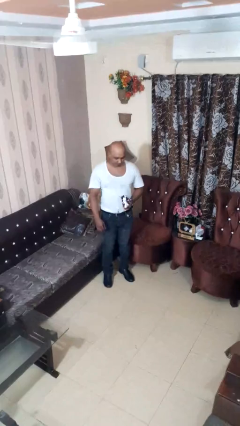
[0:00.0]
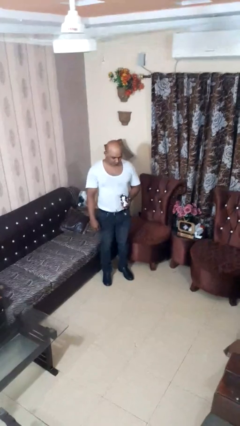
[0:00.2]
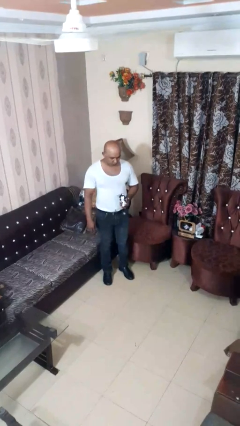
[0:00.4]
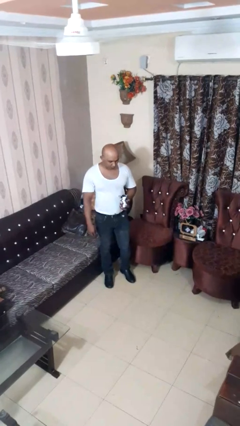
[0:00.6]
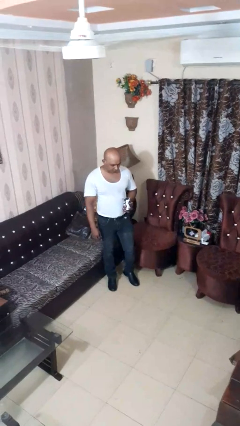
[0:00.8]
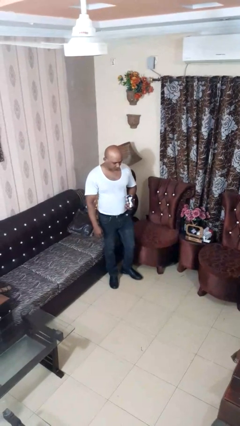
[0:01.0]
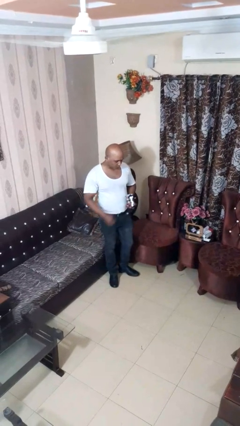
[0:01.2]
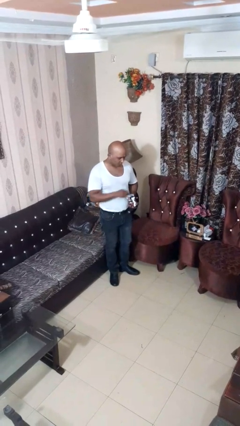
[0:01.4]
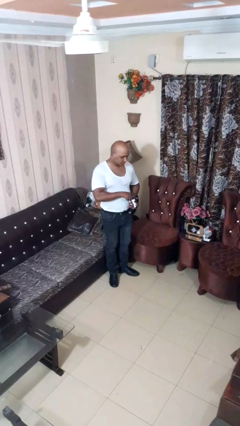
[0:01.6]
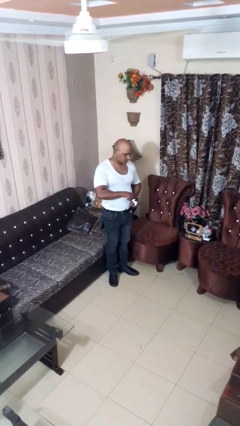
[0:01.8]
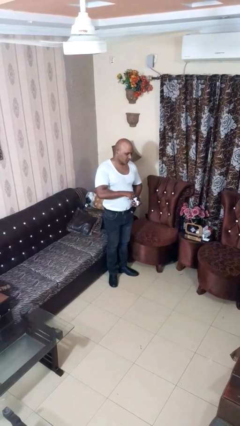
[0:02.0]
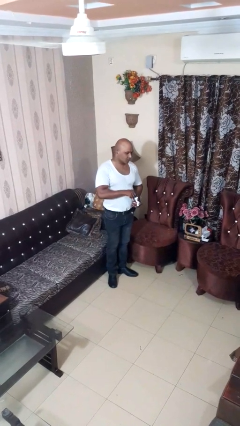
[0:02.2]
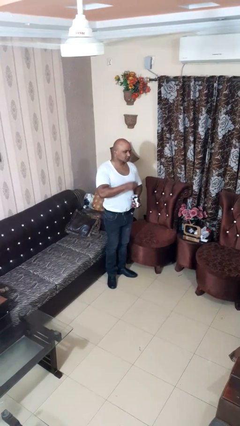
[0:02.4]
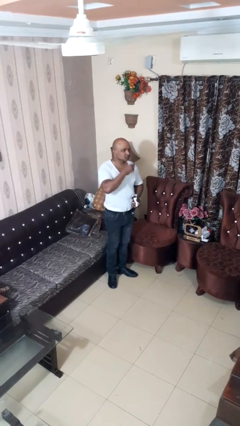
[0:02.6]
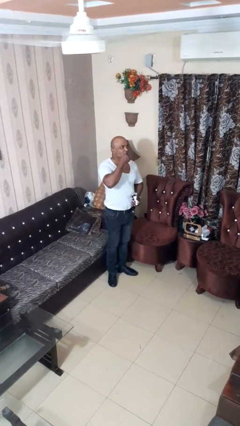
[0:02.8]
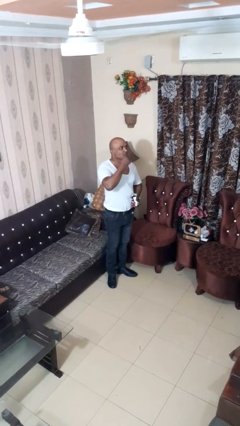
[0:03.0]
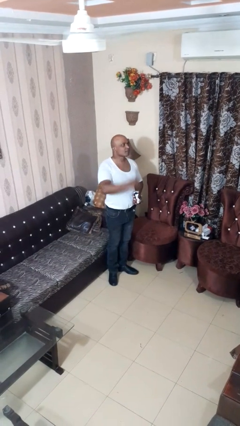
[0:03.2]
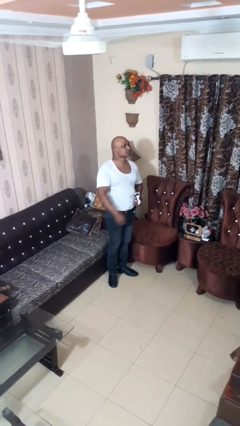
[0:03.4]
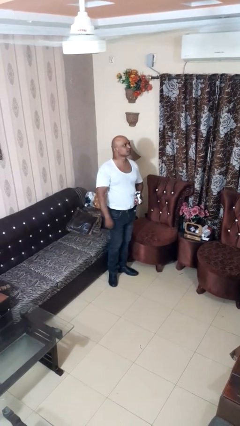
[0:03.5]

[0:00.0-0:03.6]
person eats snack from bag

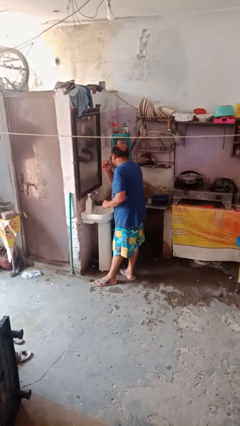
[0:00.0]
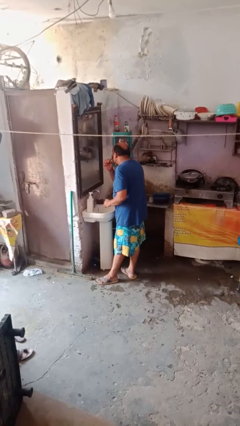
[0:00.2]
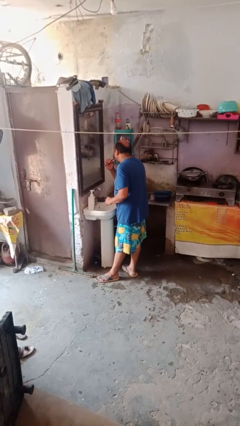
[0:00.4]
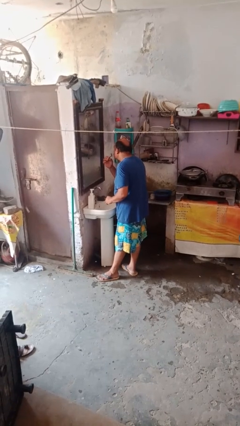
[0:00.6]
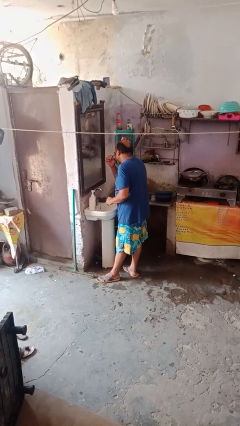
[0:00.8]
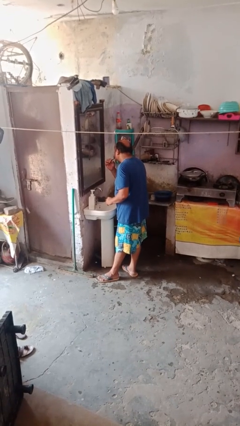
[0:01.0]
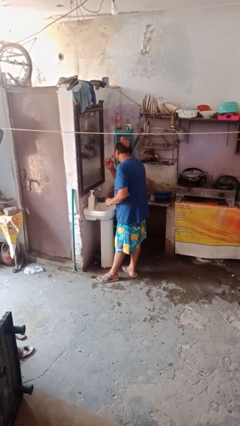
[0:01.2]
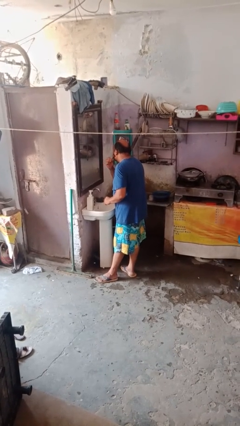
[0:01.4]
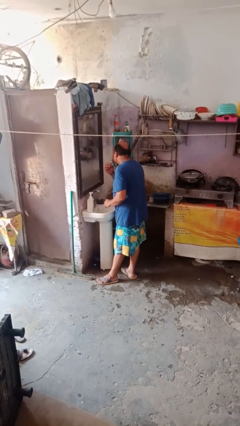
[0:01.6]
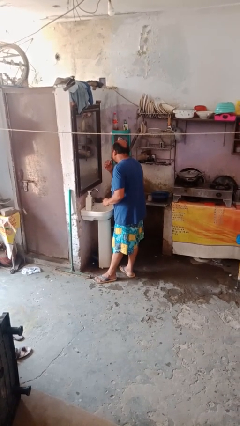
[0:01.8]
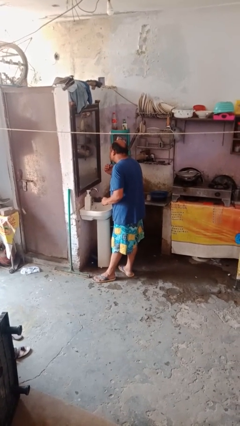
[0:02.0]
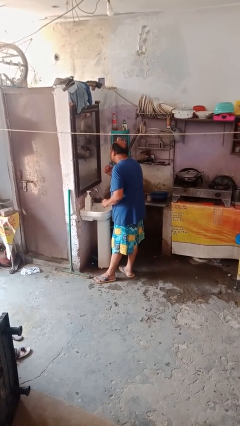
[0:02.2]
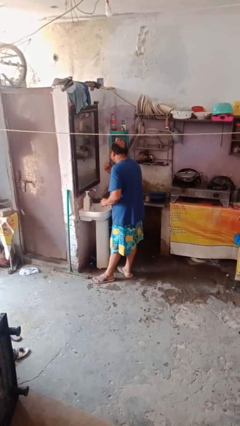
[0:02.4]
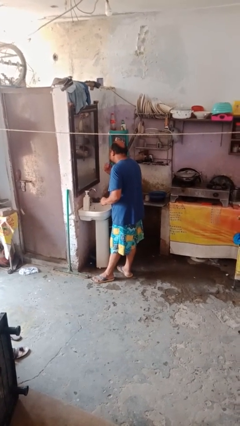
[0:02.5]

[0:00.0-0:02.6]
person shaves face

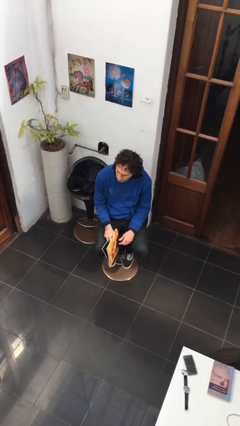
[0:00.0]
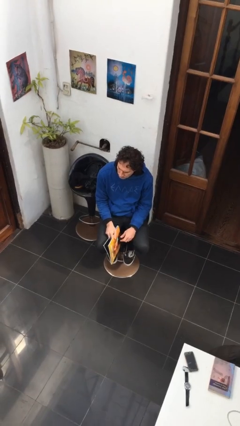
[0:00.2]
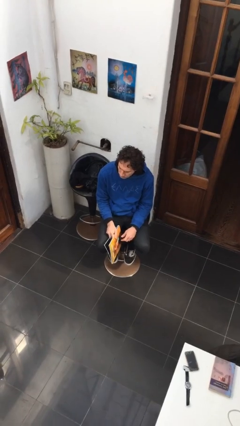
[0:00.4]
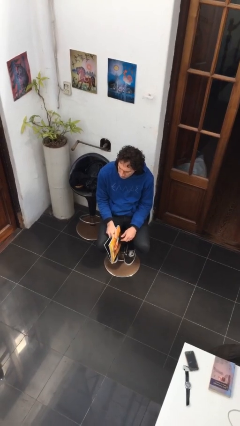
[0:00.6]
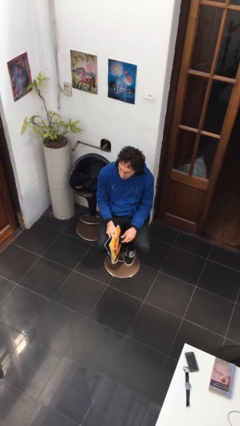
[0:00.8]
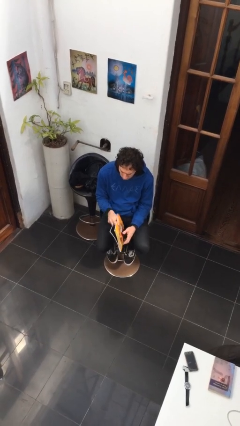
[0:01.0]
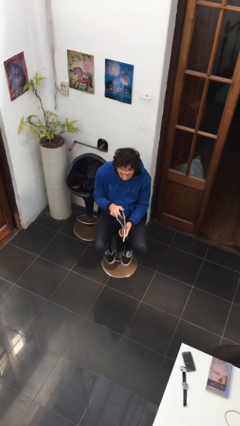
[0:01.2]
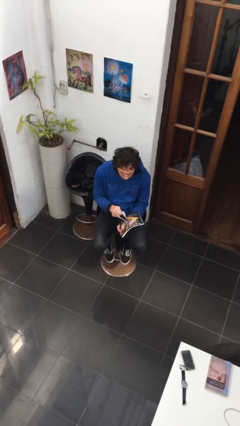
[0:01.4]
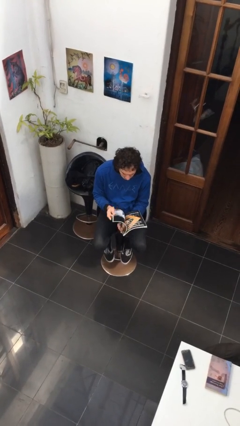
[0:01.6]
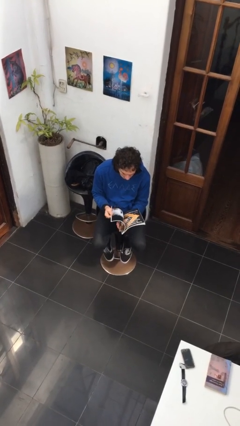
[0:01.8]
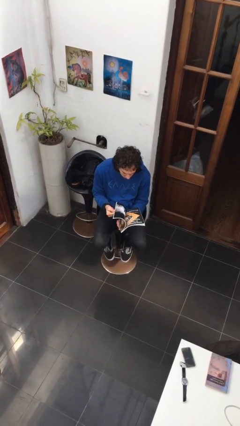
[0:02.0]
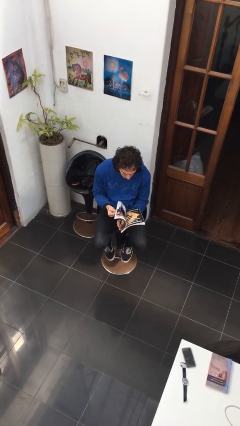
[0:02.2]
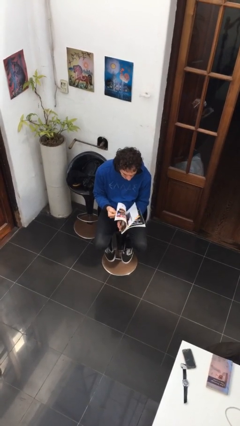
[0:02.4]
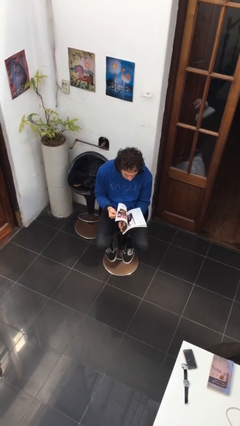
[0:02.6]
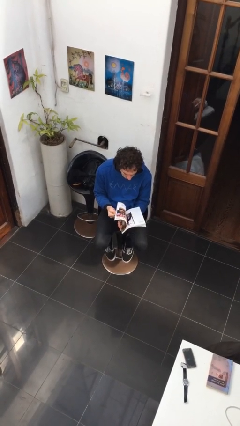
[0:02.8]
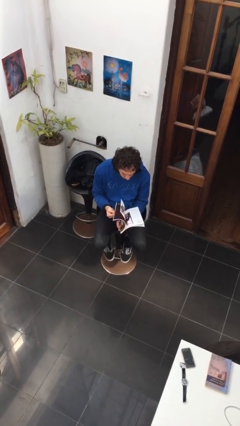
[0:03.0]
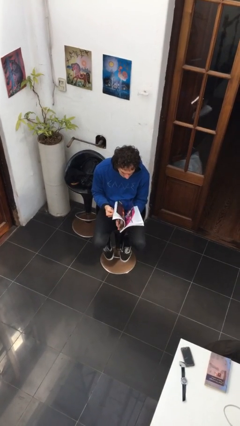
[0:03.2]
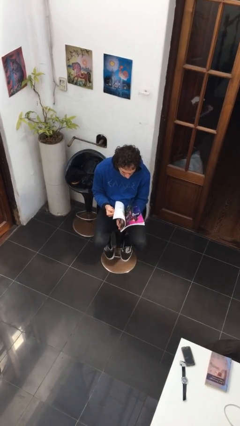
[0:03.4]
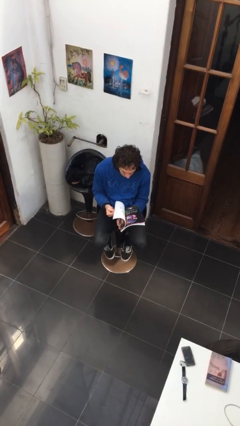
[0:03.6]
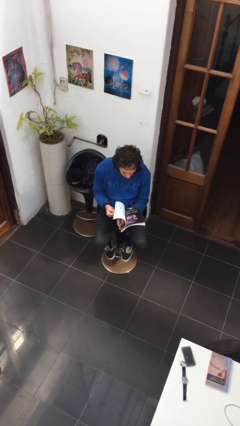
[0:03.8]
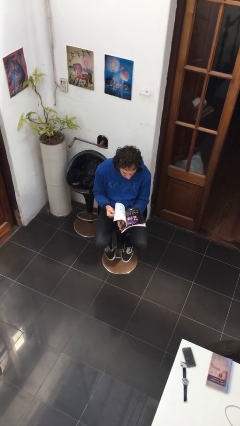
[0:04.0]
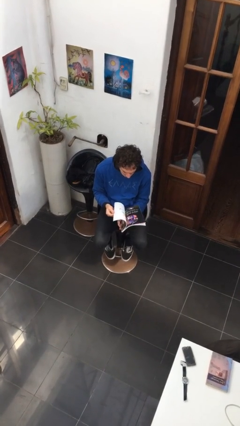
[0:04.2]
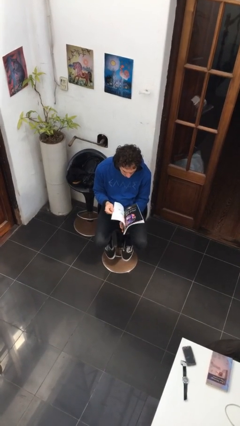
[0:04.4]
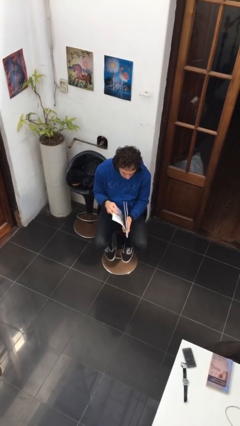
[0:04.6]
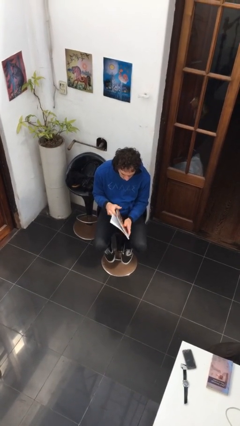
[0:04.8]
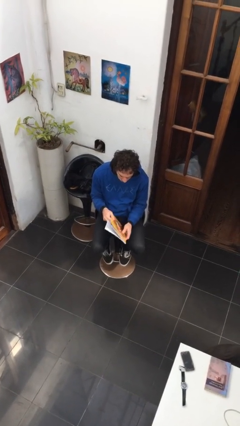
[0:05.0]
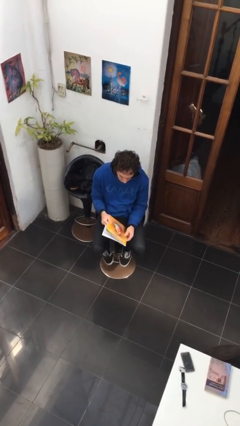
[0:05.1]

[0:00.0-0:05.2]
person reads magazine

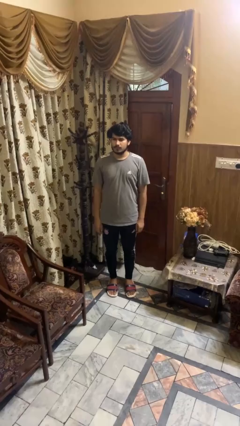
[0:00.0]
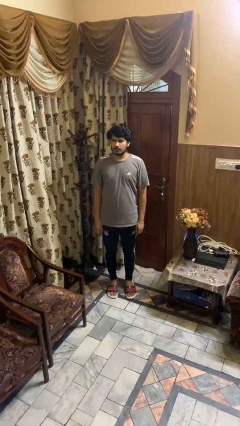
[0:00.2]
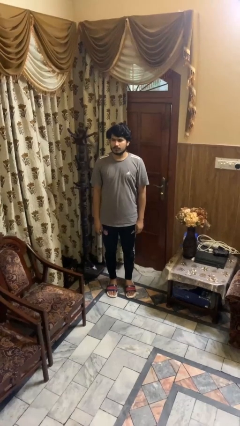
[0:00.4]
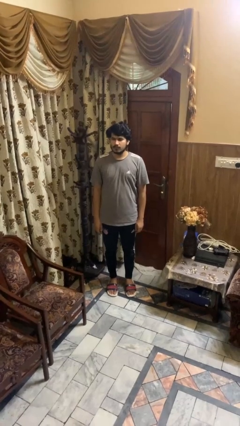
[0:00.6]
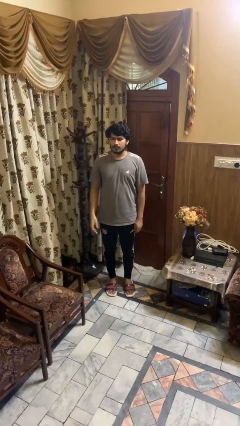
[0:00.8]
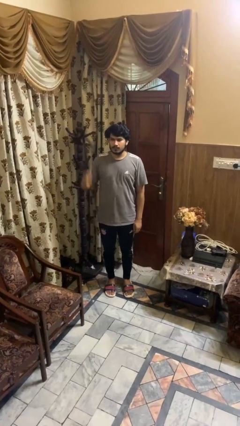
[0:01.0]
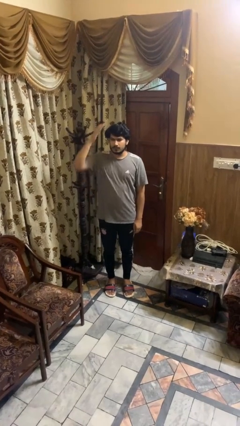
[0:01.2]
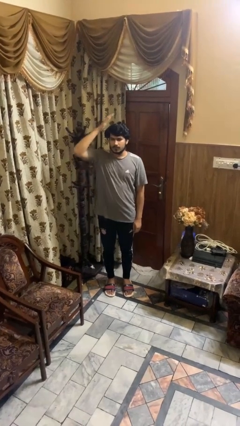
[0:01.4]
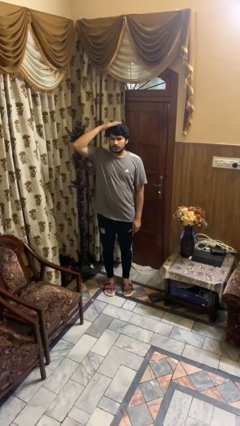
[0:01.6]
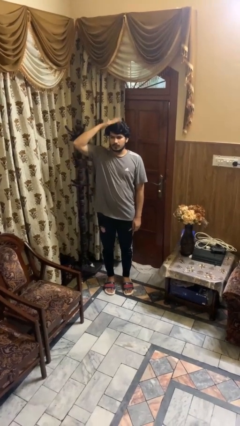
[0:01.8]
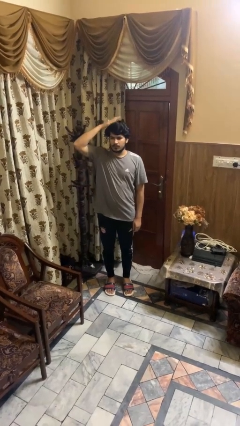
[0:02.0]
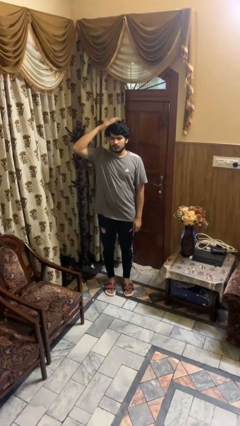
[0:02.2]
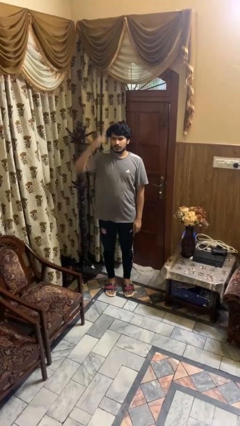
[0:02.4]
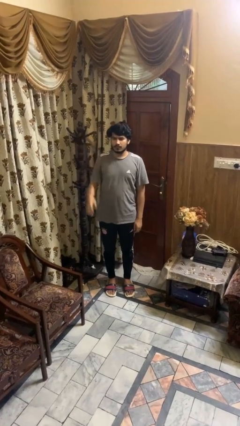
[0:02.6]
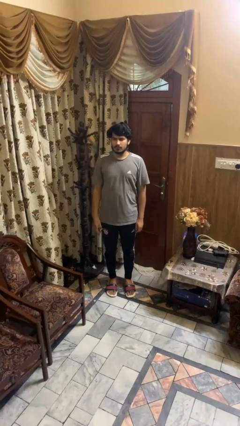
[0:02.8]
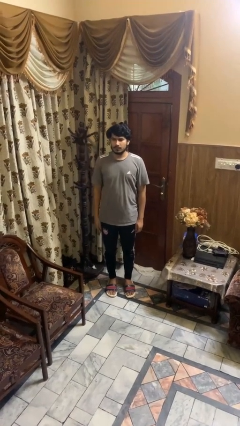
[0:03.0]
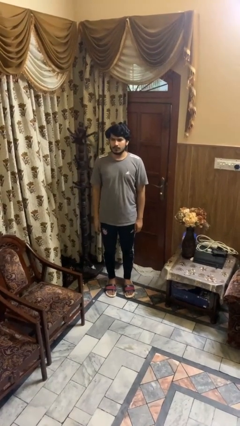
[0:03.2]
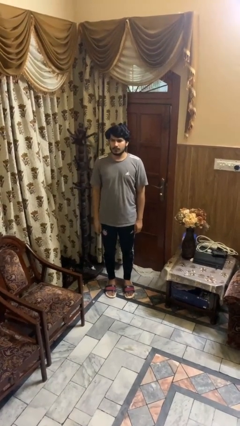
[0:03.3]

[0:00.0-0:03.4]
person pats head

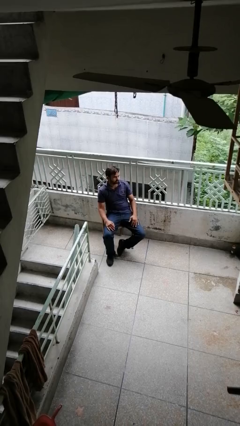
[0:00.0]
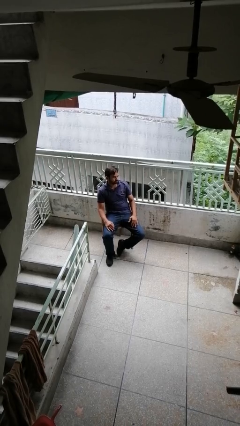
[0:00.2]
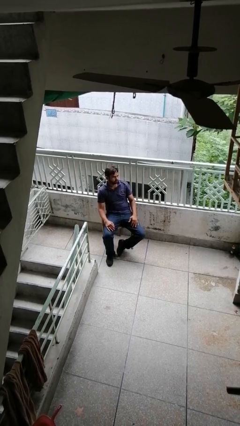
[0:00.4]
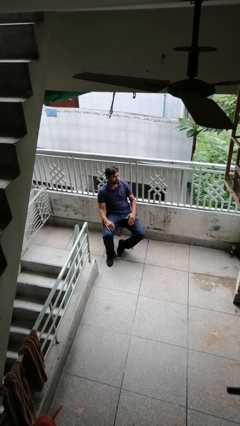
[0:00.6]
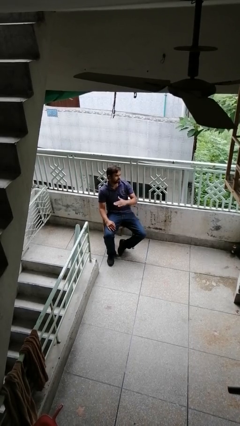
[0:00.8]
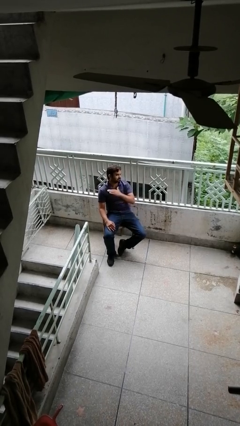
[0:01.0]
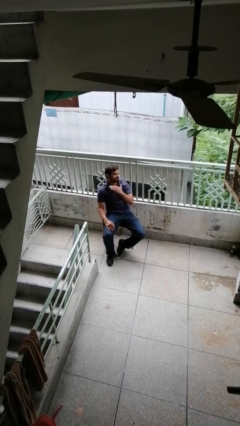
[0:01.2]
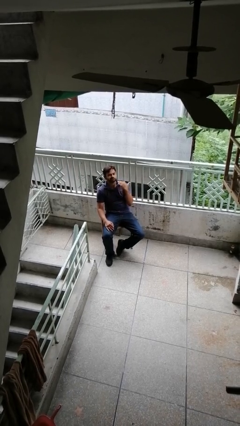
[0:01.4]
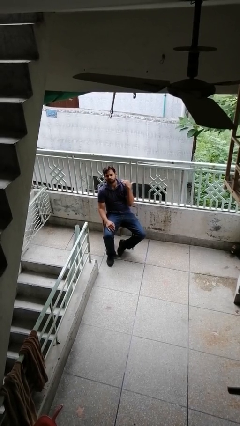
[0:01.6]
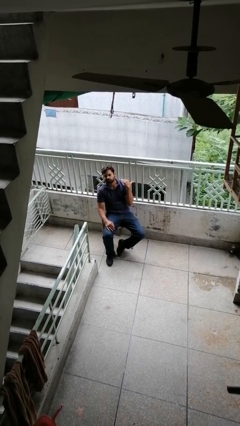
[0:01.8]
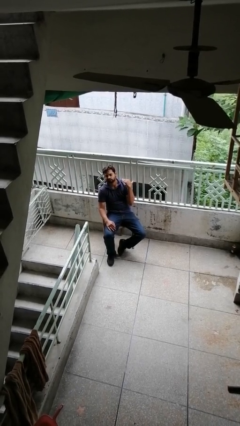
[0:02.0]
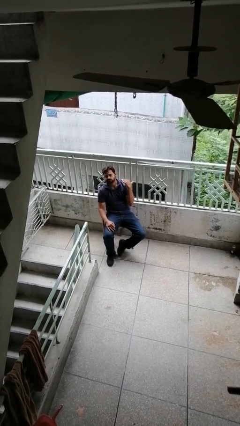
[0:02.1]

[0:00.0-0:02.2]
person gestures cut

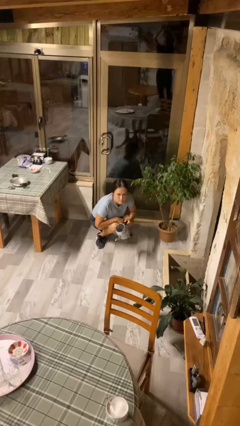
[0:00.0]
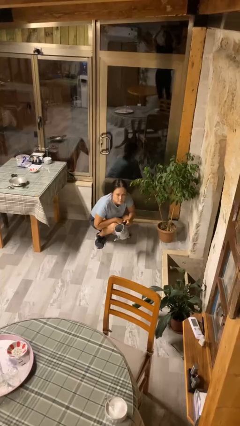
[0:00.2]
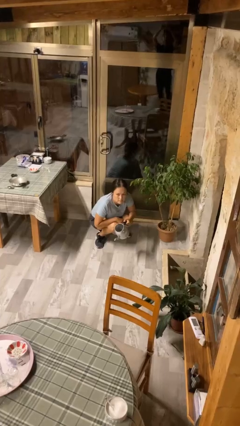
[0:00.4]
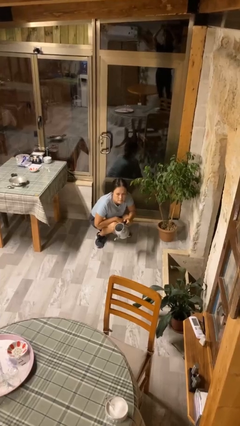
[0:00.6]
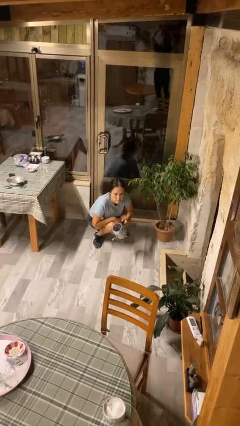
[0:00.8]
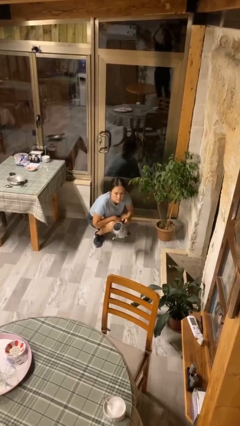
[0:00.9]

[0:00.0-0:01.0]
person waters houseplant
